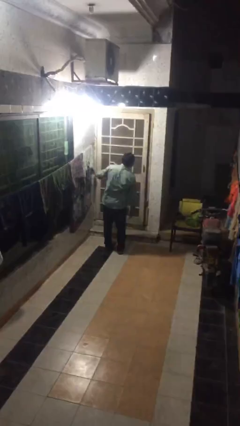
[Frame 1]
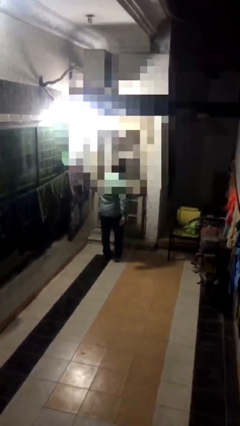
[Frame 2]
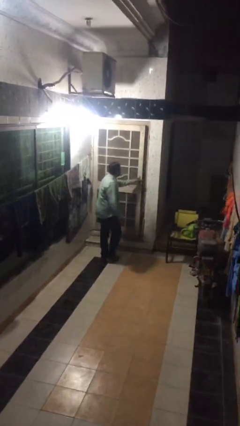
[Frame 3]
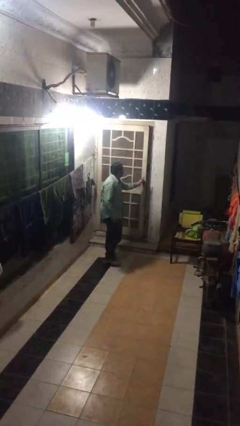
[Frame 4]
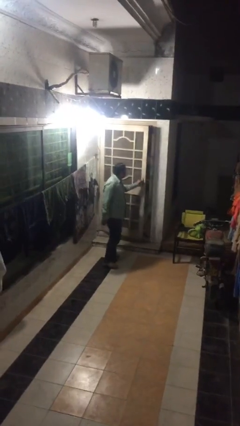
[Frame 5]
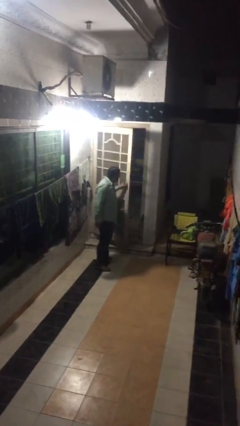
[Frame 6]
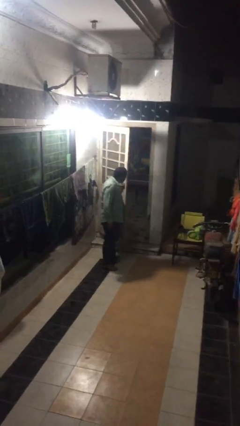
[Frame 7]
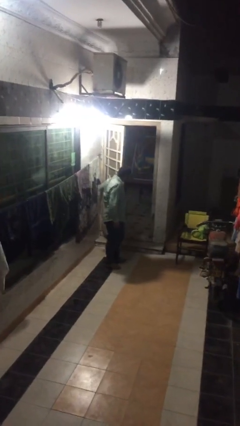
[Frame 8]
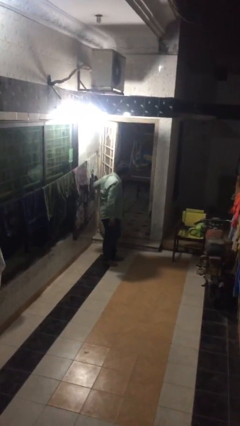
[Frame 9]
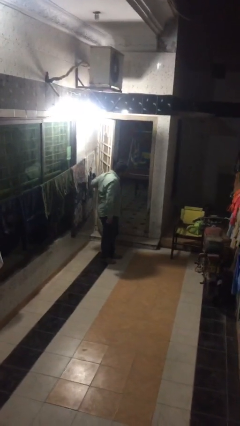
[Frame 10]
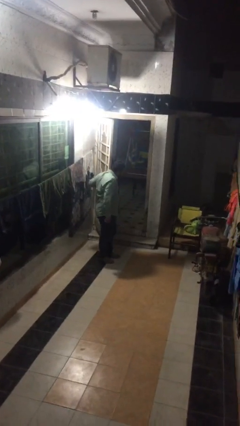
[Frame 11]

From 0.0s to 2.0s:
person opens facility door

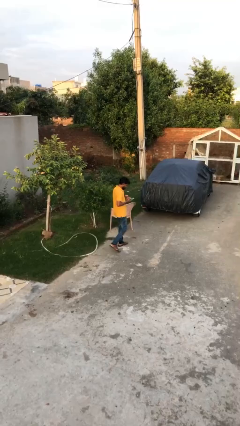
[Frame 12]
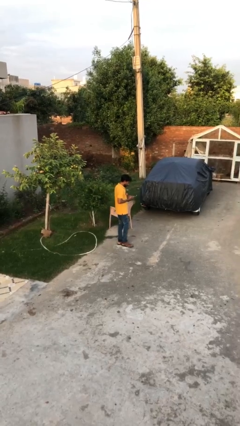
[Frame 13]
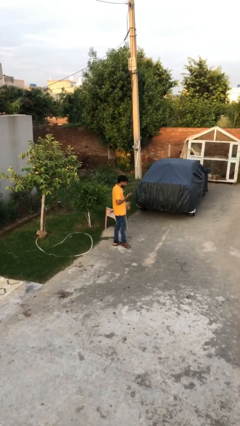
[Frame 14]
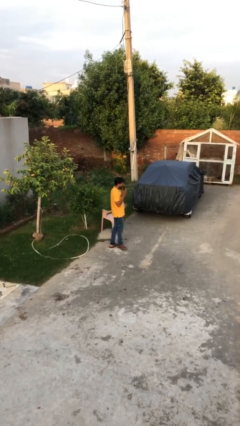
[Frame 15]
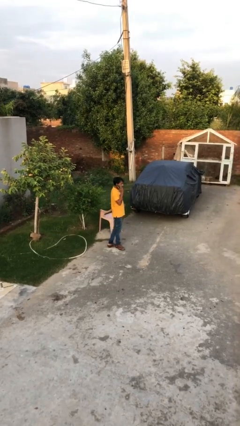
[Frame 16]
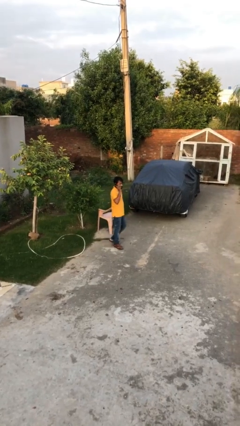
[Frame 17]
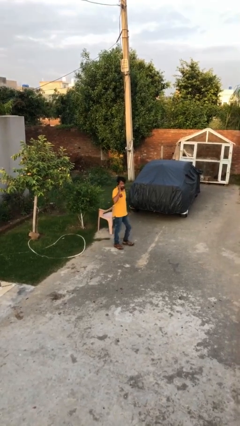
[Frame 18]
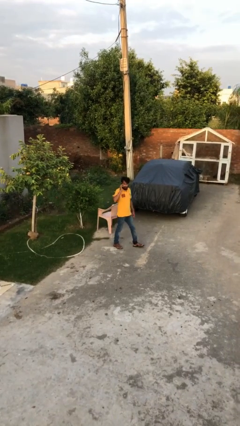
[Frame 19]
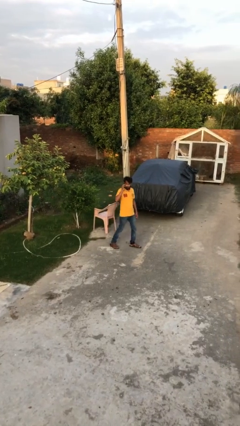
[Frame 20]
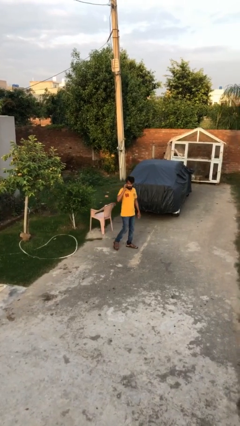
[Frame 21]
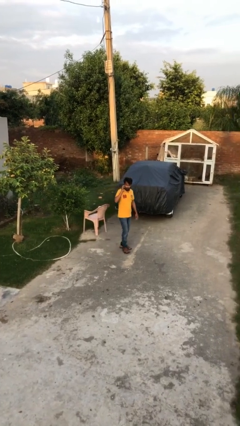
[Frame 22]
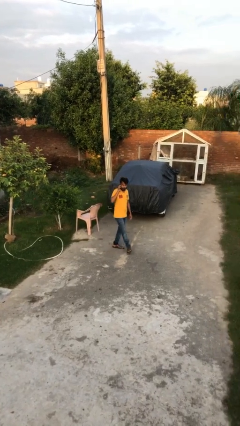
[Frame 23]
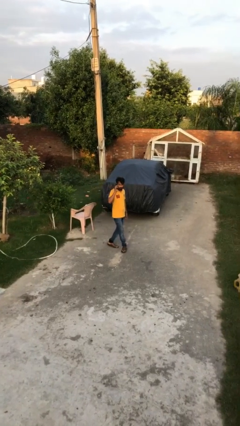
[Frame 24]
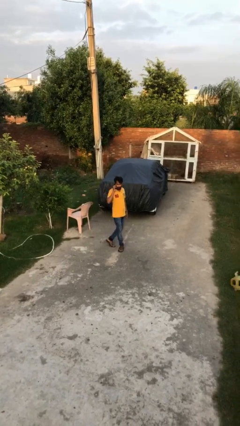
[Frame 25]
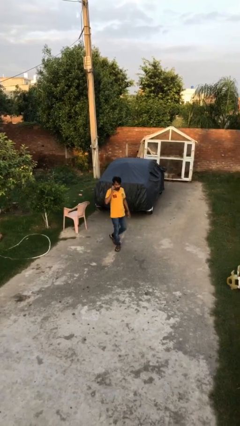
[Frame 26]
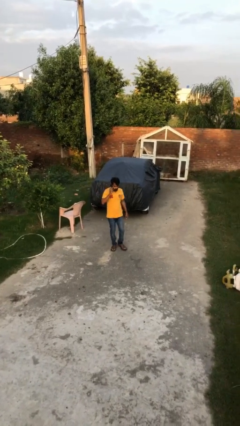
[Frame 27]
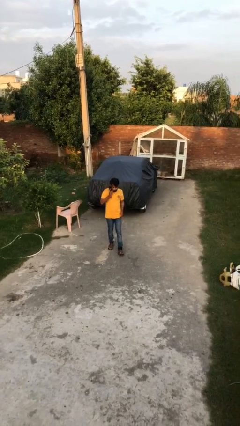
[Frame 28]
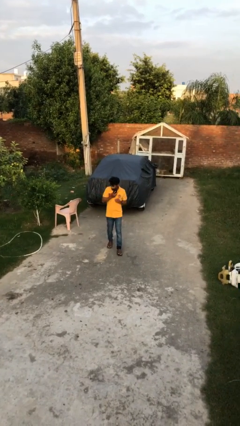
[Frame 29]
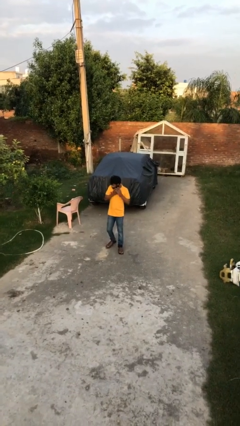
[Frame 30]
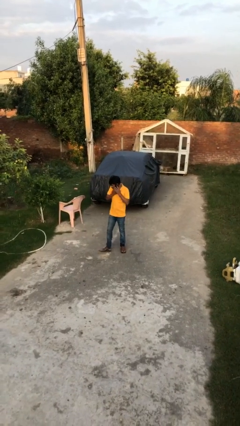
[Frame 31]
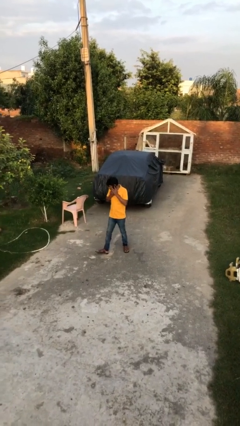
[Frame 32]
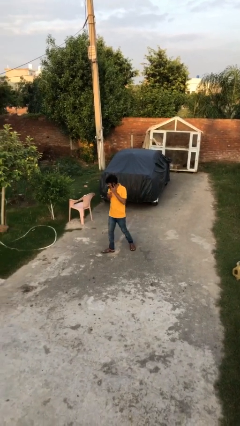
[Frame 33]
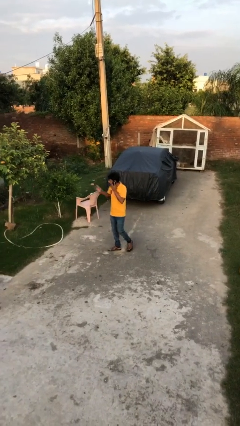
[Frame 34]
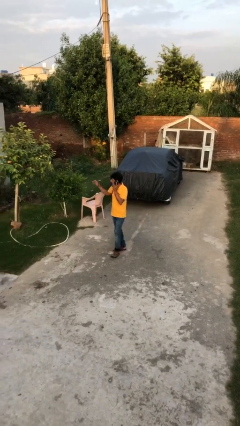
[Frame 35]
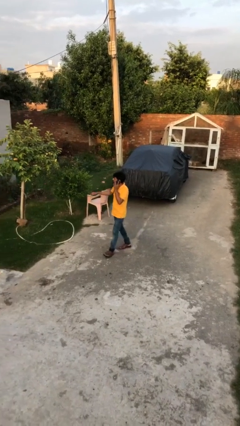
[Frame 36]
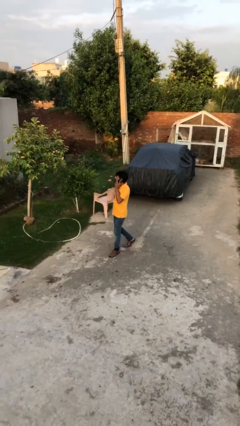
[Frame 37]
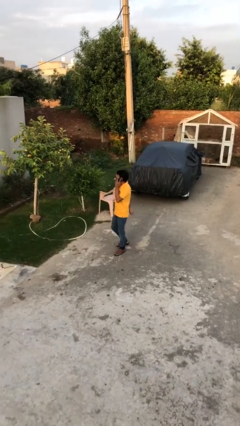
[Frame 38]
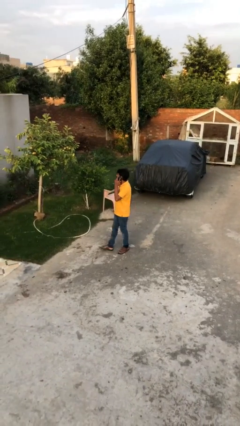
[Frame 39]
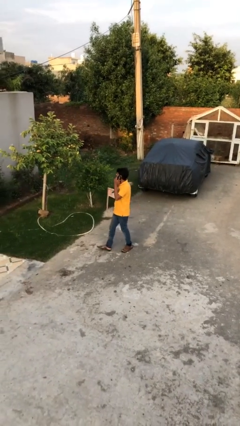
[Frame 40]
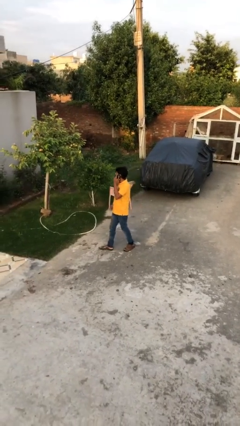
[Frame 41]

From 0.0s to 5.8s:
person talks on phone

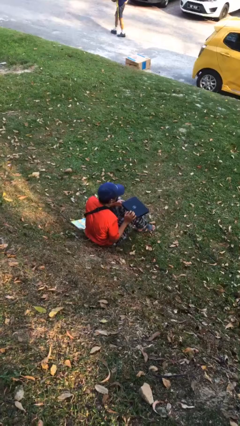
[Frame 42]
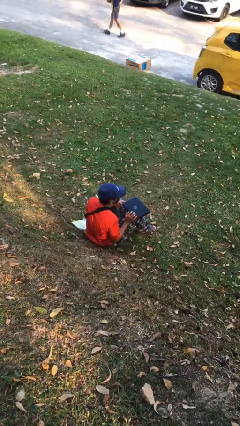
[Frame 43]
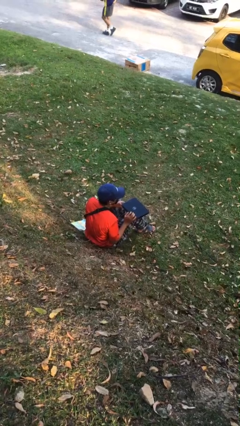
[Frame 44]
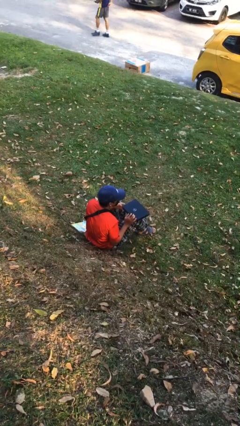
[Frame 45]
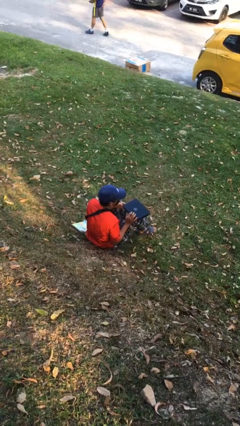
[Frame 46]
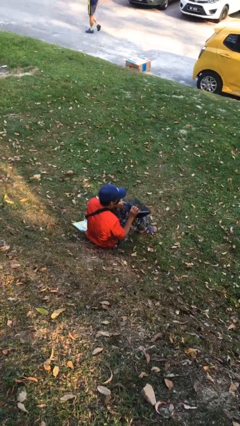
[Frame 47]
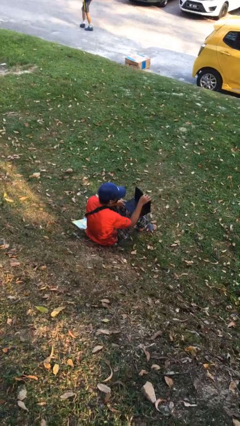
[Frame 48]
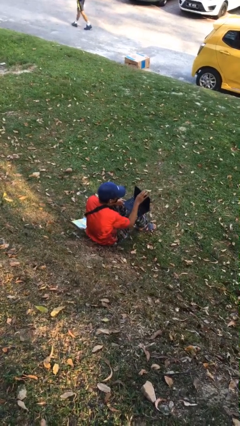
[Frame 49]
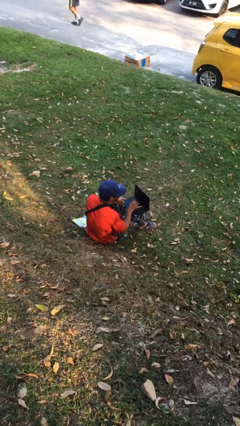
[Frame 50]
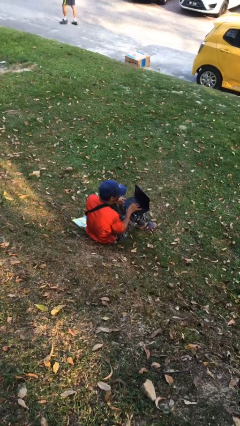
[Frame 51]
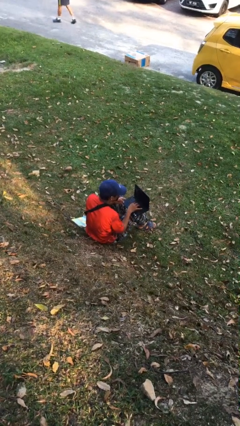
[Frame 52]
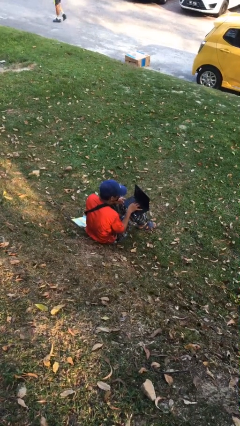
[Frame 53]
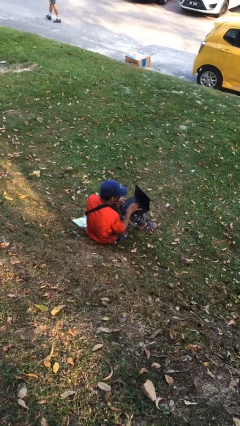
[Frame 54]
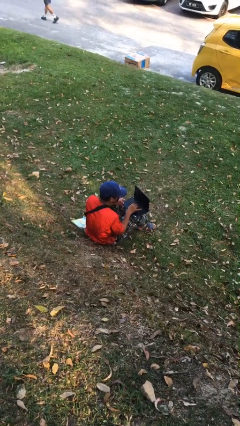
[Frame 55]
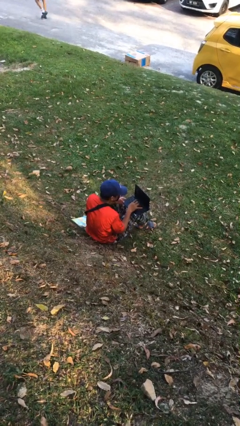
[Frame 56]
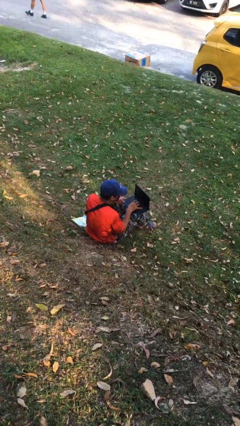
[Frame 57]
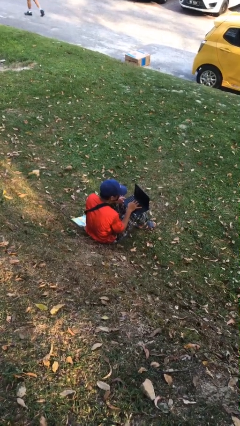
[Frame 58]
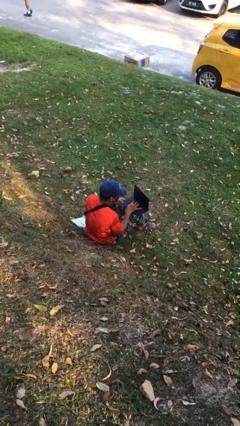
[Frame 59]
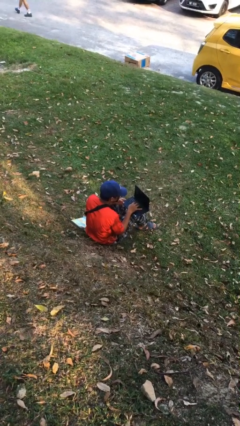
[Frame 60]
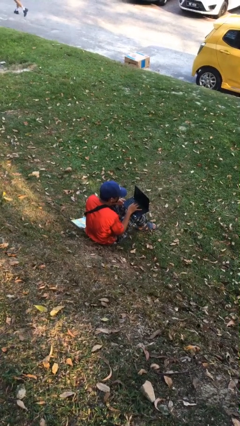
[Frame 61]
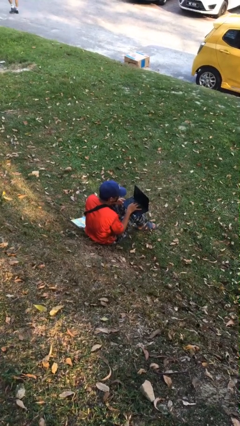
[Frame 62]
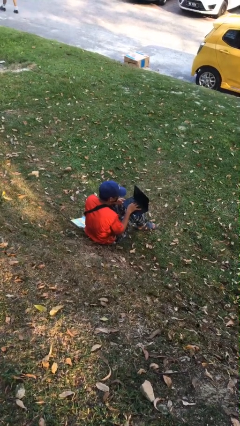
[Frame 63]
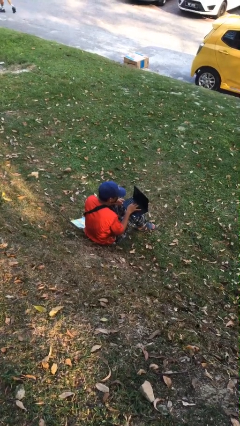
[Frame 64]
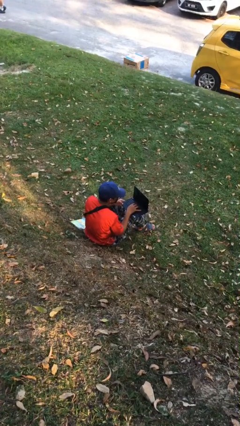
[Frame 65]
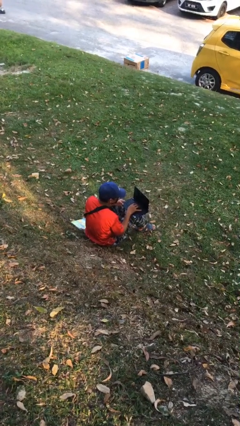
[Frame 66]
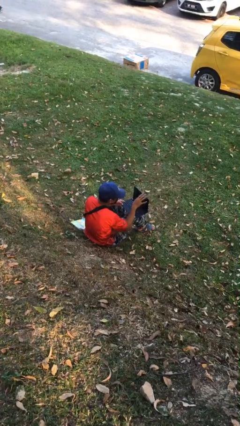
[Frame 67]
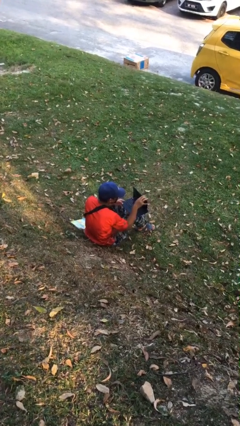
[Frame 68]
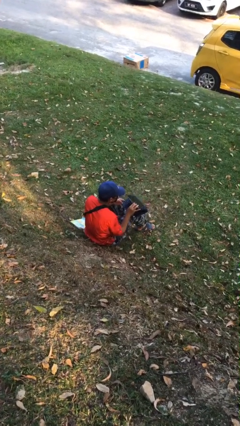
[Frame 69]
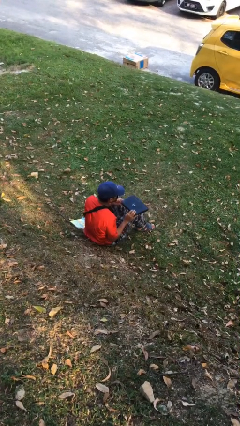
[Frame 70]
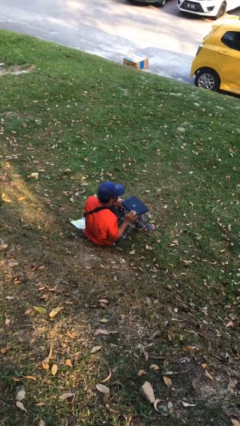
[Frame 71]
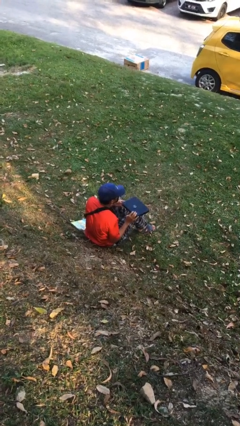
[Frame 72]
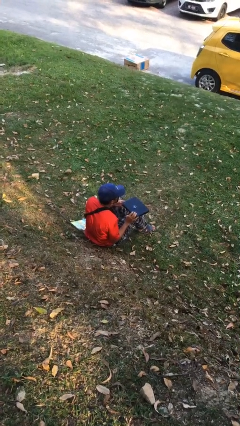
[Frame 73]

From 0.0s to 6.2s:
person interacts with laptop

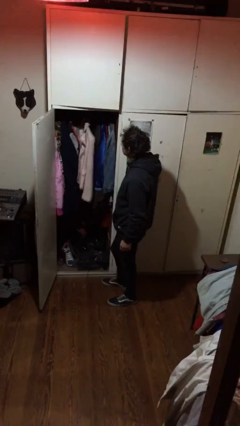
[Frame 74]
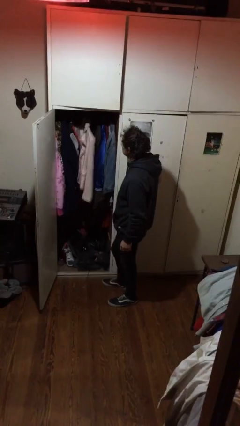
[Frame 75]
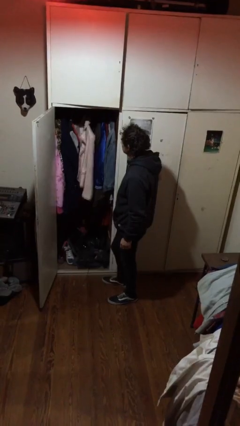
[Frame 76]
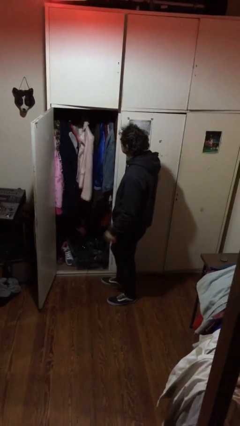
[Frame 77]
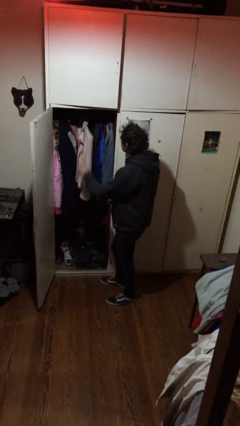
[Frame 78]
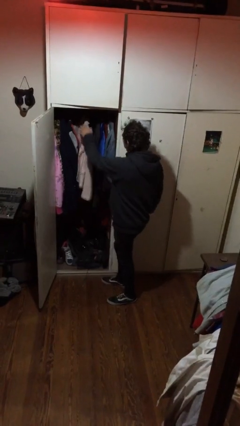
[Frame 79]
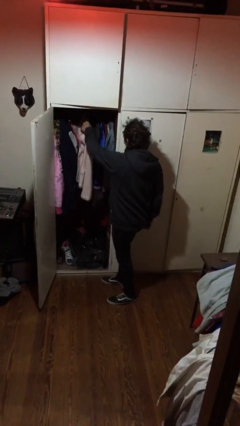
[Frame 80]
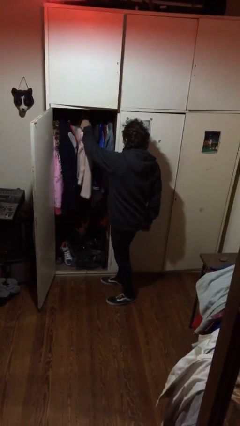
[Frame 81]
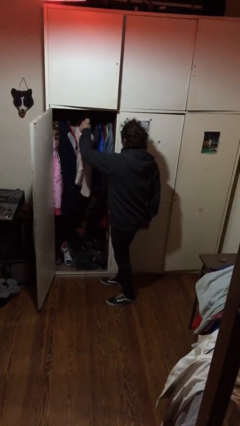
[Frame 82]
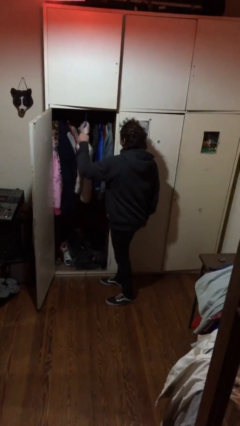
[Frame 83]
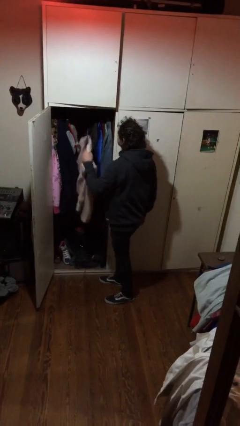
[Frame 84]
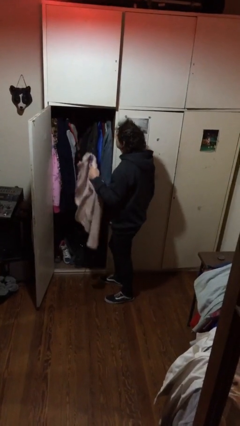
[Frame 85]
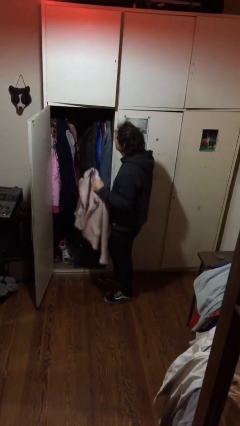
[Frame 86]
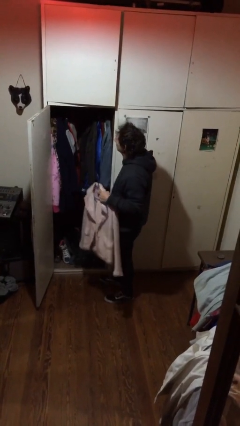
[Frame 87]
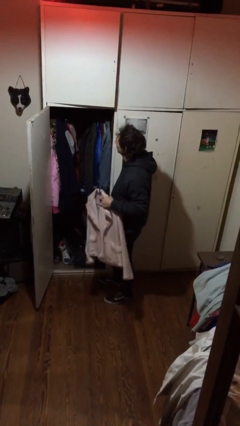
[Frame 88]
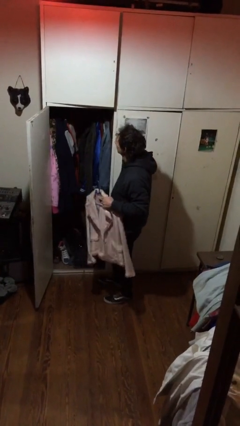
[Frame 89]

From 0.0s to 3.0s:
person takes clothes from closet

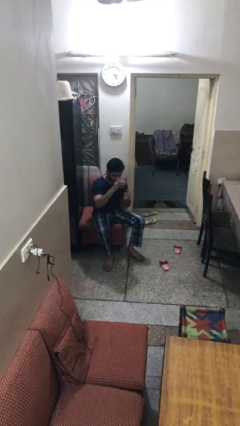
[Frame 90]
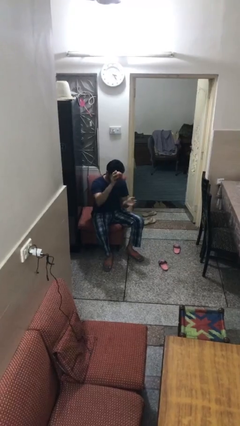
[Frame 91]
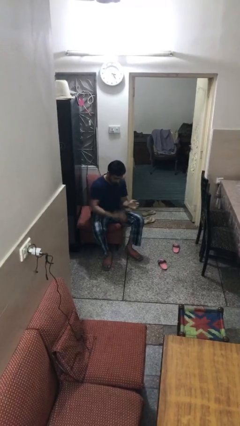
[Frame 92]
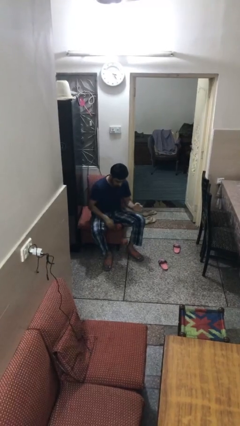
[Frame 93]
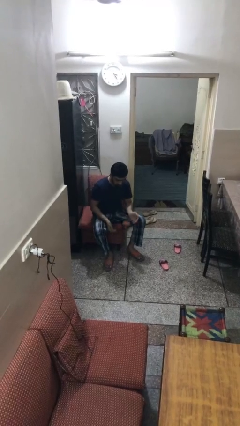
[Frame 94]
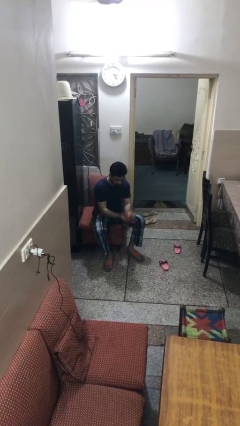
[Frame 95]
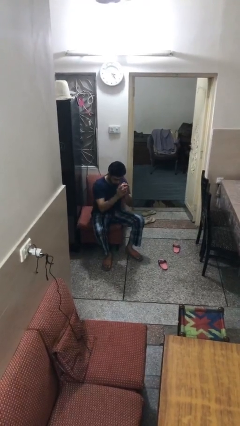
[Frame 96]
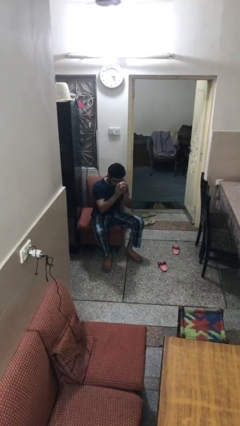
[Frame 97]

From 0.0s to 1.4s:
person bounces ball on floor
